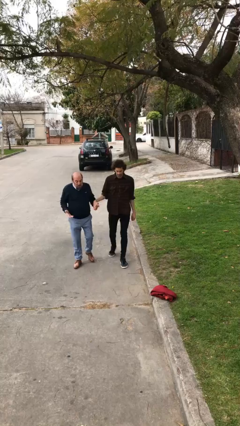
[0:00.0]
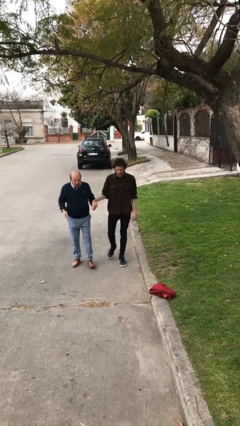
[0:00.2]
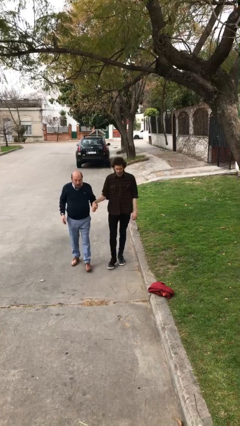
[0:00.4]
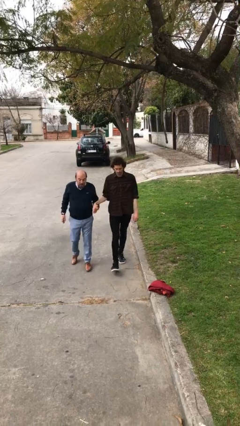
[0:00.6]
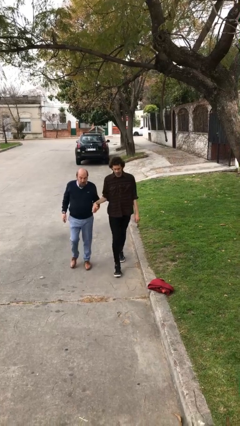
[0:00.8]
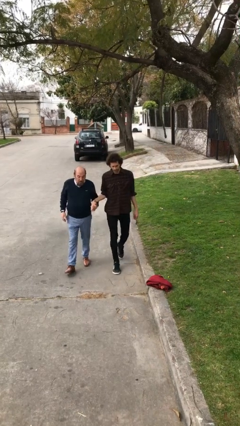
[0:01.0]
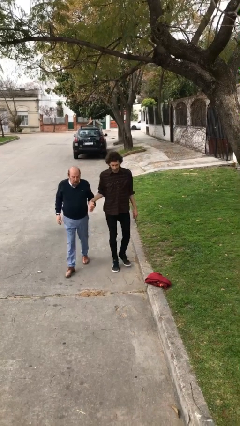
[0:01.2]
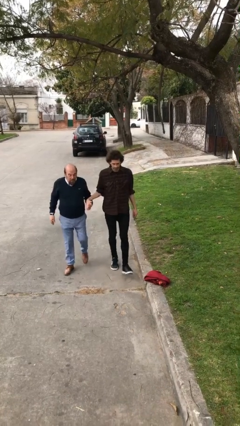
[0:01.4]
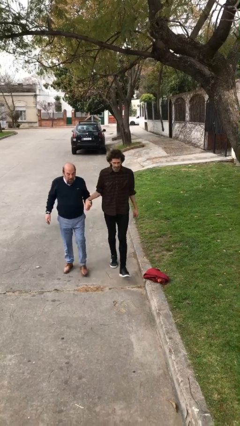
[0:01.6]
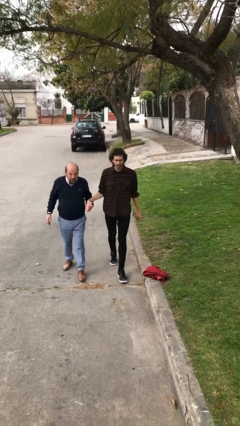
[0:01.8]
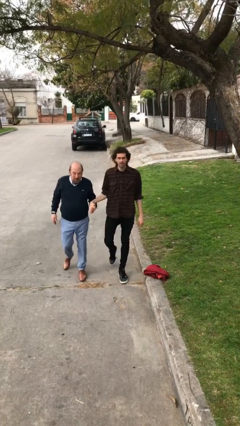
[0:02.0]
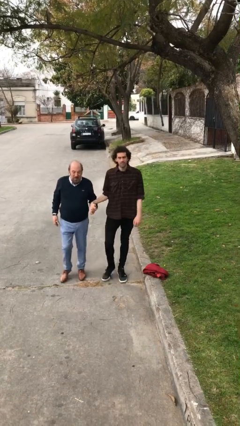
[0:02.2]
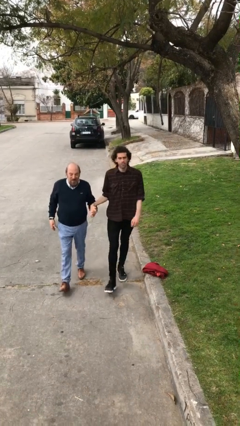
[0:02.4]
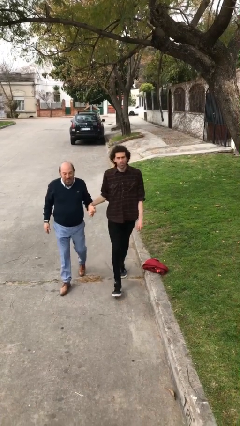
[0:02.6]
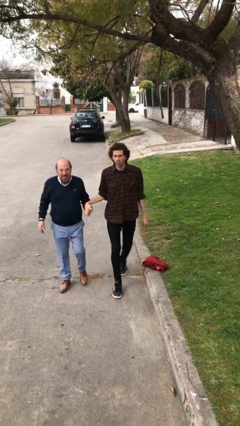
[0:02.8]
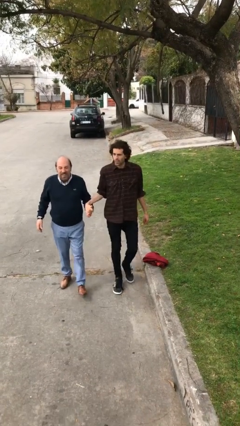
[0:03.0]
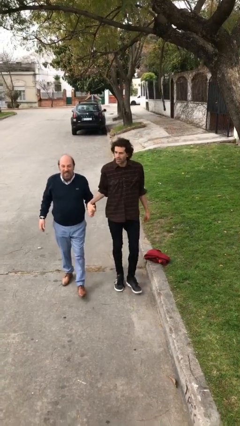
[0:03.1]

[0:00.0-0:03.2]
person holds hand

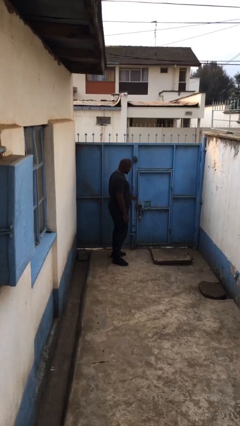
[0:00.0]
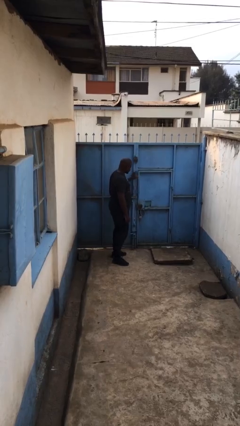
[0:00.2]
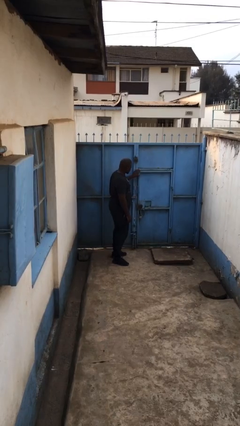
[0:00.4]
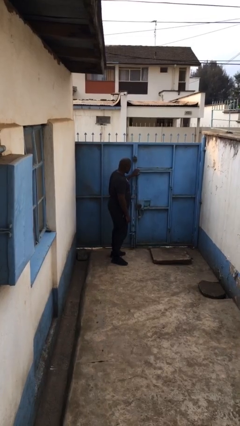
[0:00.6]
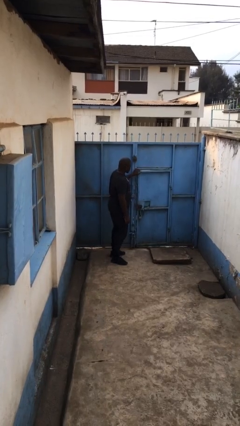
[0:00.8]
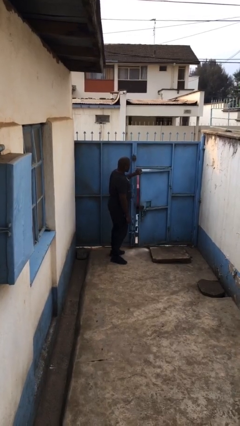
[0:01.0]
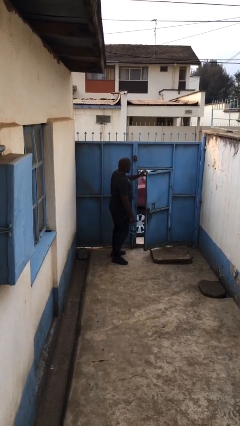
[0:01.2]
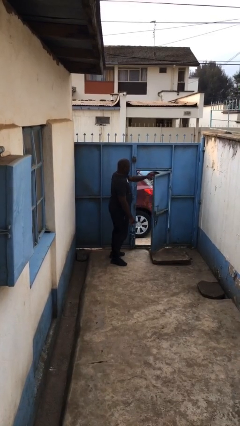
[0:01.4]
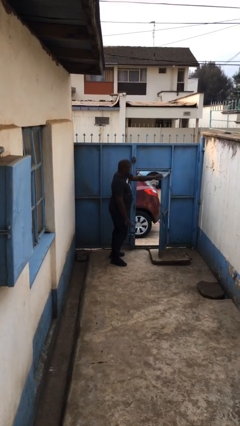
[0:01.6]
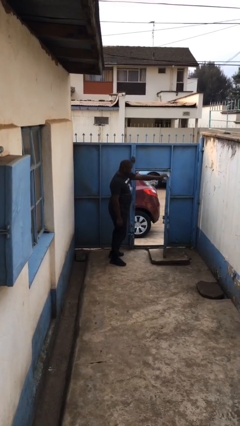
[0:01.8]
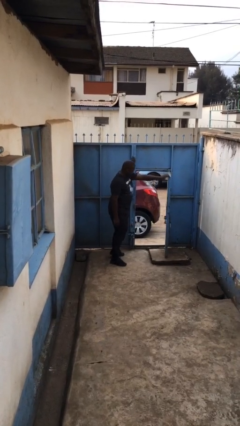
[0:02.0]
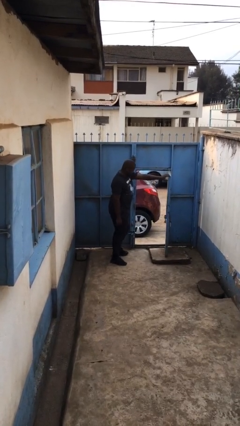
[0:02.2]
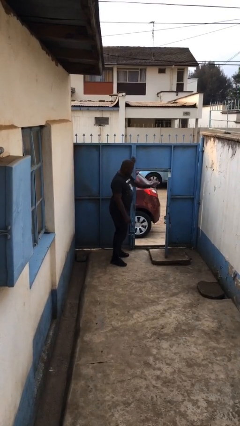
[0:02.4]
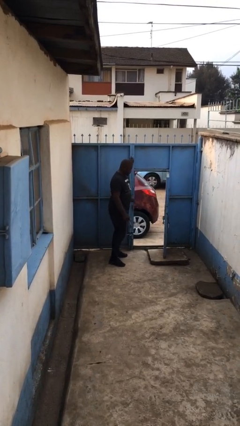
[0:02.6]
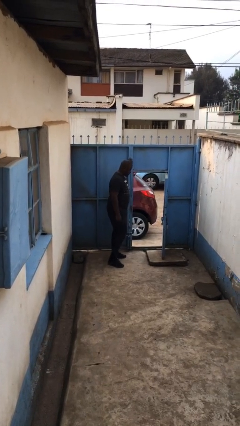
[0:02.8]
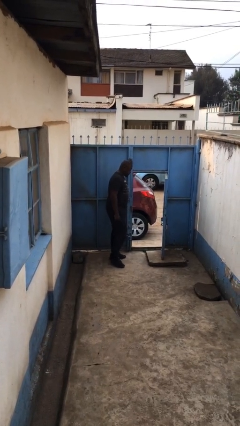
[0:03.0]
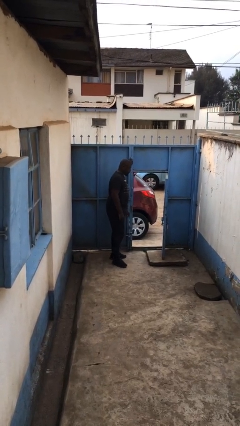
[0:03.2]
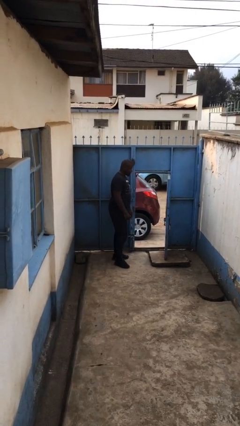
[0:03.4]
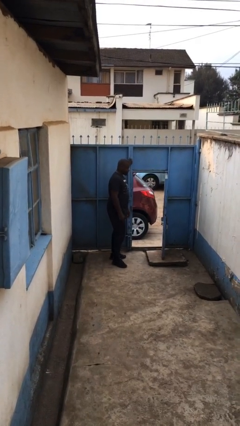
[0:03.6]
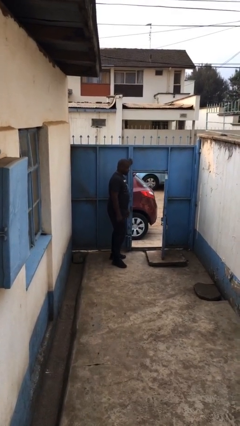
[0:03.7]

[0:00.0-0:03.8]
person opens gate

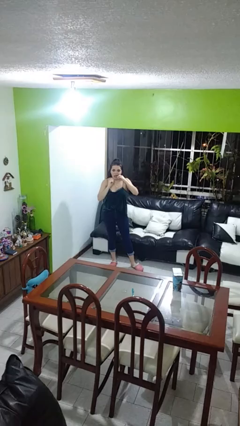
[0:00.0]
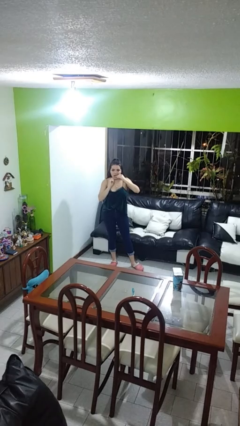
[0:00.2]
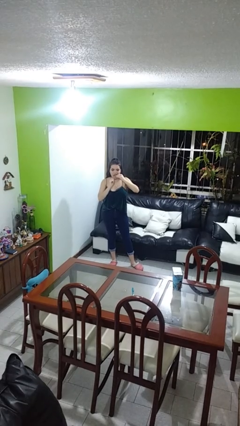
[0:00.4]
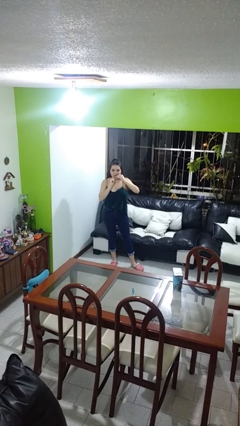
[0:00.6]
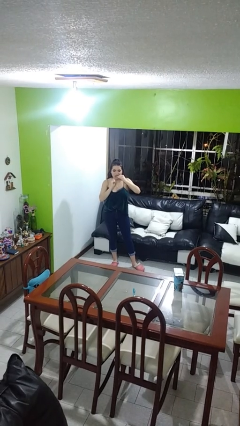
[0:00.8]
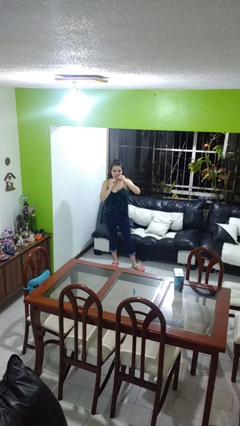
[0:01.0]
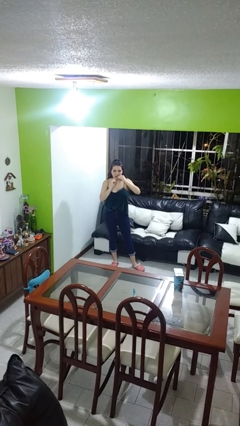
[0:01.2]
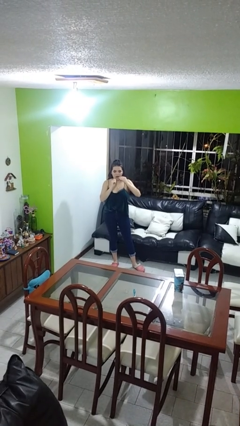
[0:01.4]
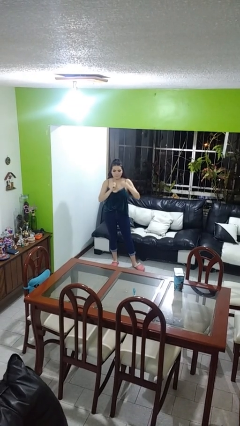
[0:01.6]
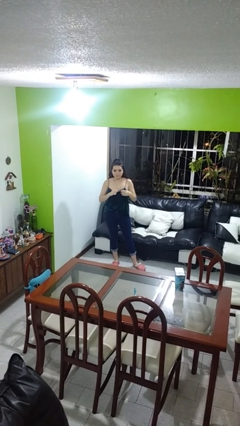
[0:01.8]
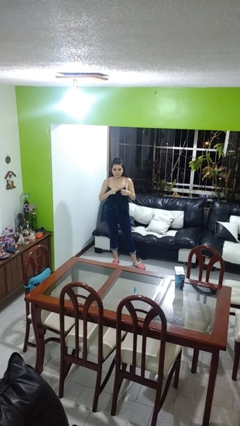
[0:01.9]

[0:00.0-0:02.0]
person flosses

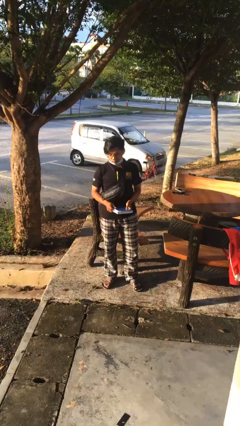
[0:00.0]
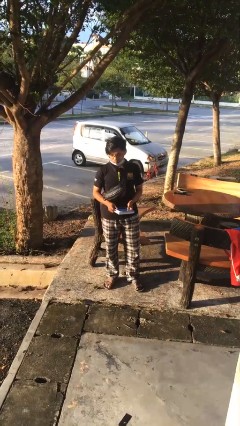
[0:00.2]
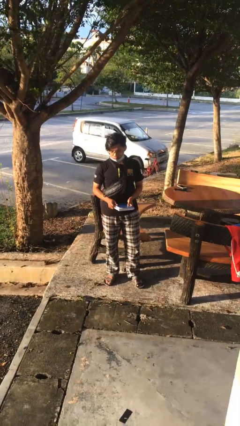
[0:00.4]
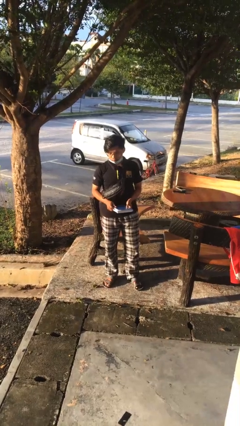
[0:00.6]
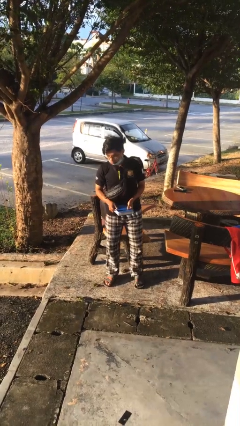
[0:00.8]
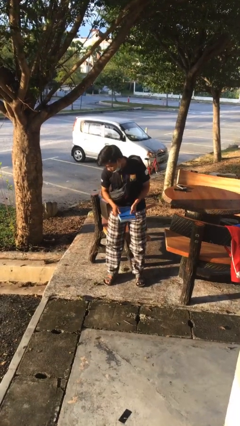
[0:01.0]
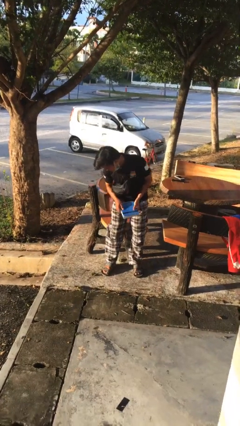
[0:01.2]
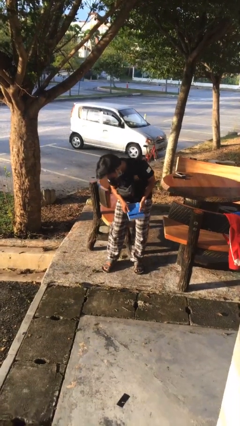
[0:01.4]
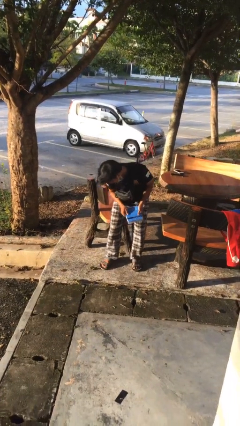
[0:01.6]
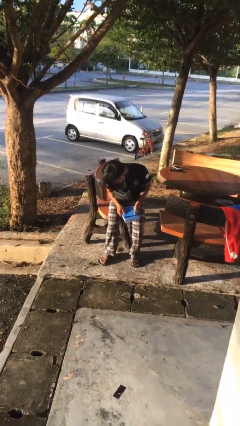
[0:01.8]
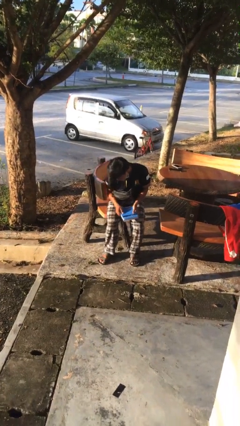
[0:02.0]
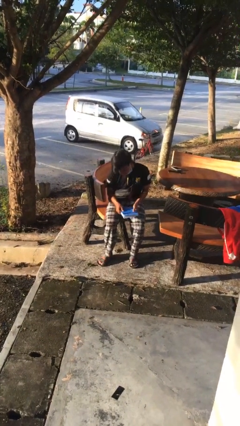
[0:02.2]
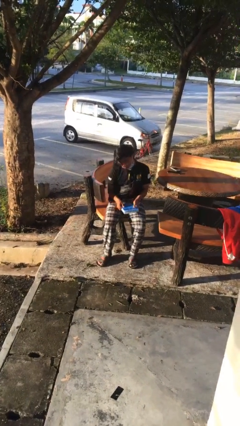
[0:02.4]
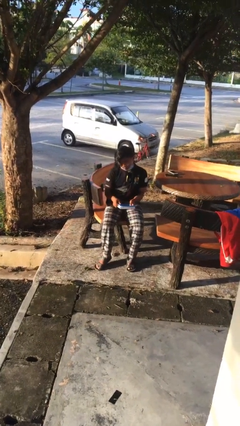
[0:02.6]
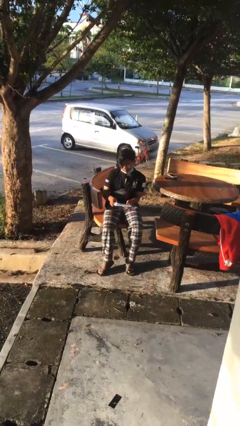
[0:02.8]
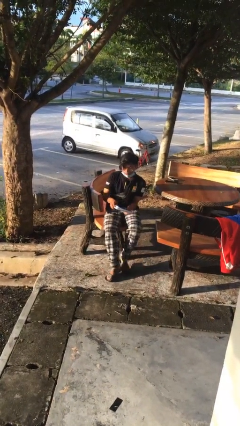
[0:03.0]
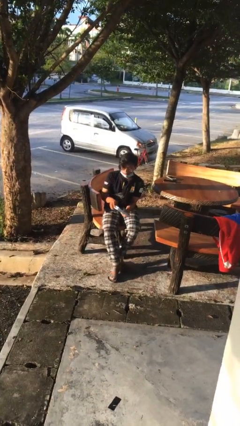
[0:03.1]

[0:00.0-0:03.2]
person sits down

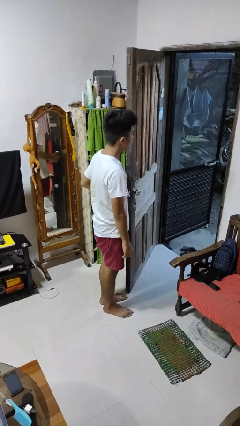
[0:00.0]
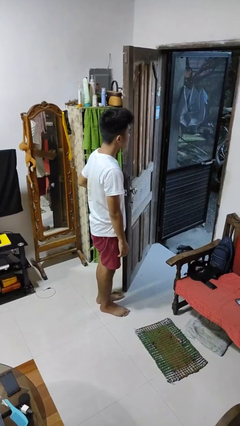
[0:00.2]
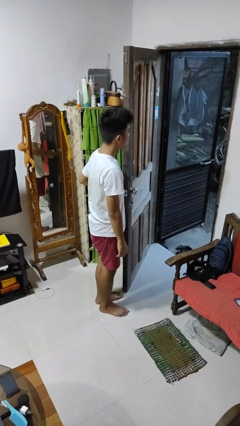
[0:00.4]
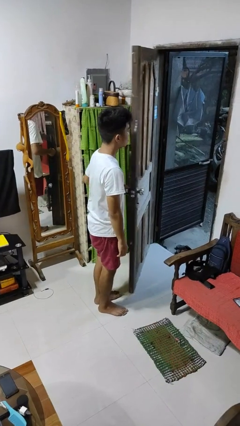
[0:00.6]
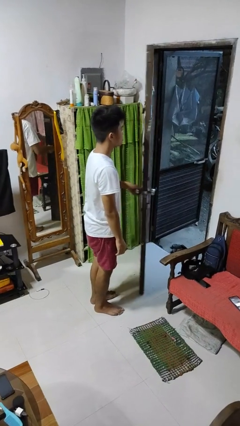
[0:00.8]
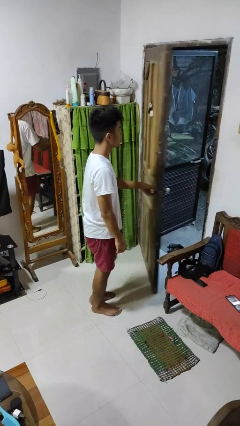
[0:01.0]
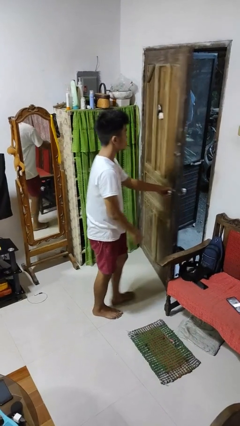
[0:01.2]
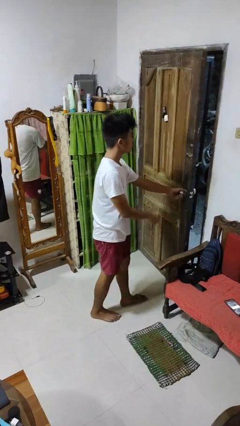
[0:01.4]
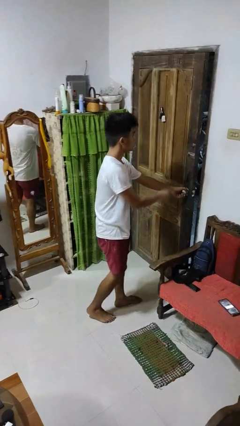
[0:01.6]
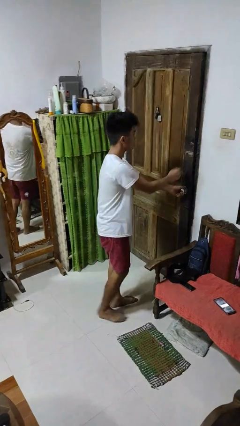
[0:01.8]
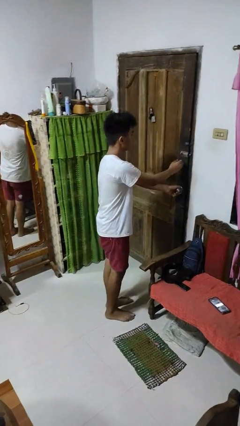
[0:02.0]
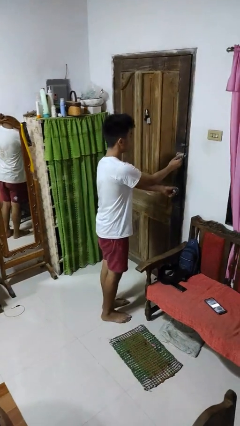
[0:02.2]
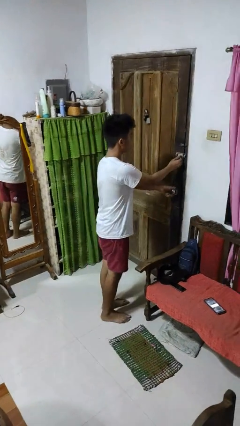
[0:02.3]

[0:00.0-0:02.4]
person closes facility door

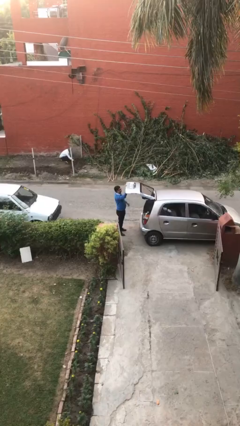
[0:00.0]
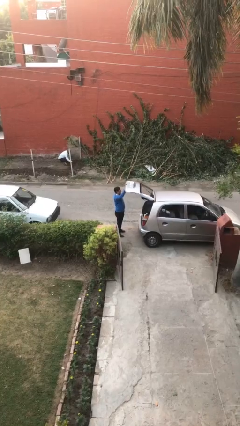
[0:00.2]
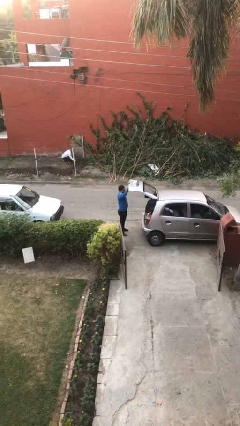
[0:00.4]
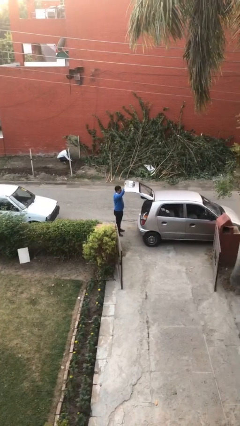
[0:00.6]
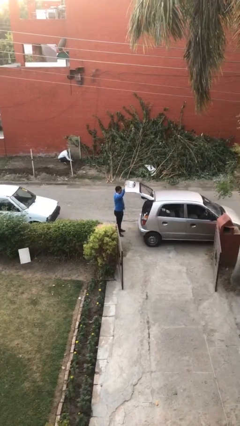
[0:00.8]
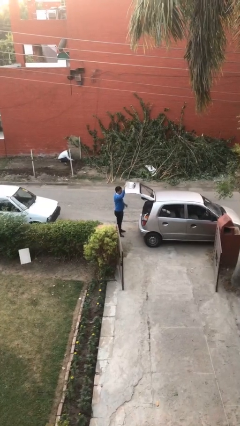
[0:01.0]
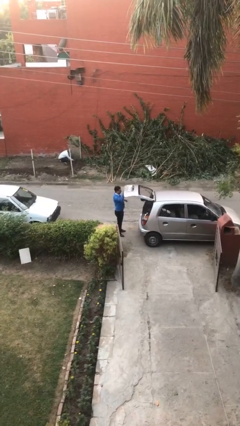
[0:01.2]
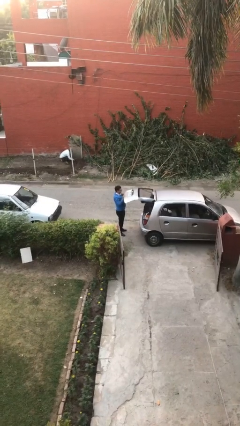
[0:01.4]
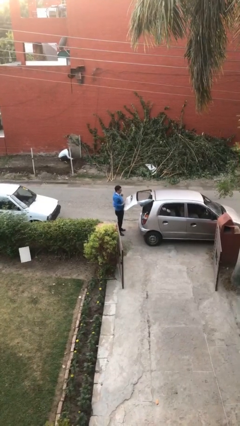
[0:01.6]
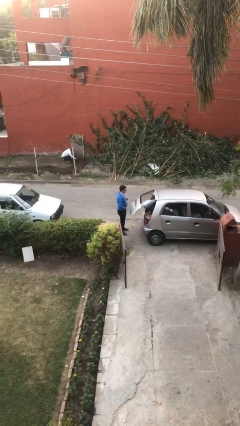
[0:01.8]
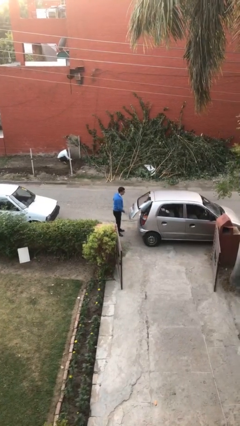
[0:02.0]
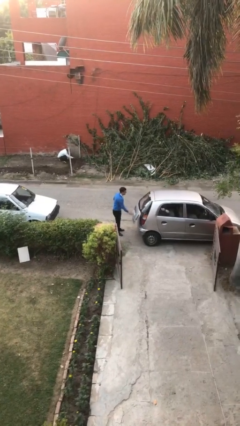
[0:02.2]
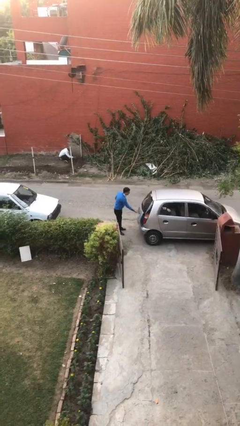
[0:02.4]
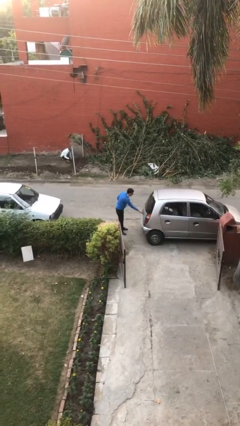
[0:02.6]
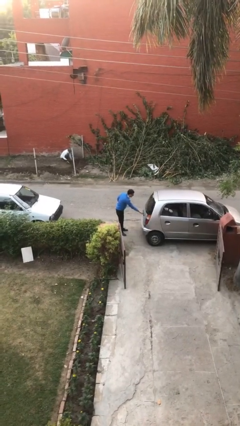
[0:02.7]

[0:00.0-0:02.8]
person closes car trunk

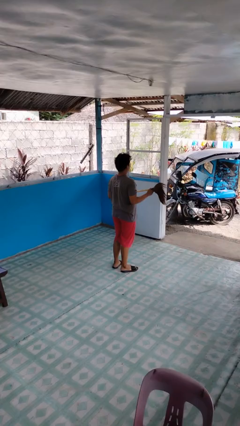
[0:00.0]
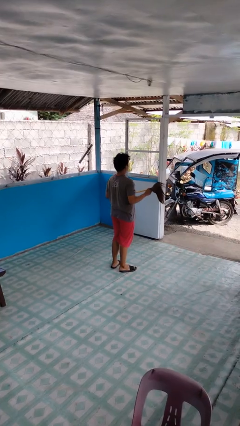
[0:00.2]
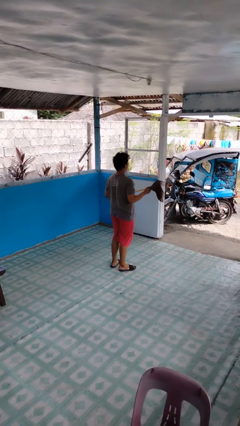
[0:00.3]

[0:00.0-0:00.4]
person throws object to ground
